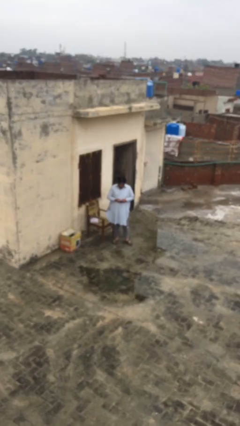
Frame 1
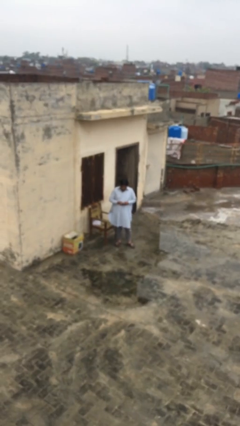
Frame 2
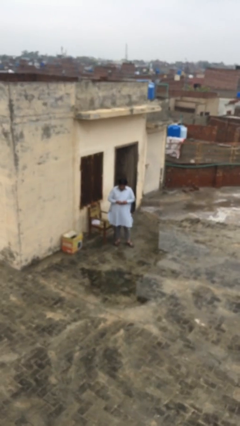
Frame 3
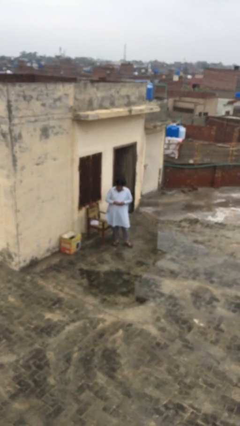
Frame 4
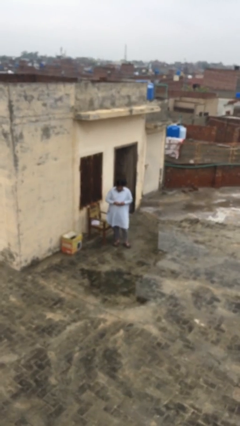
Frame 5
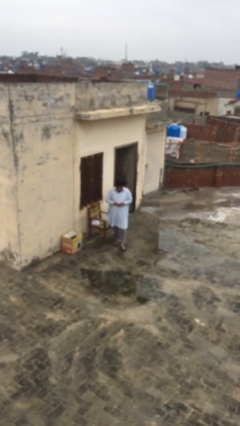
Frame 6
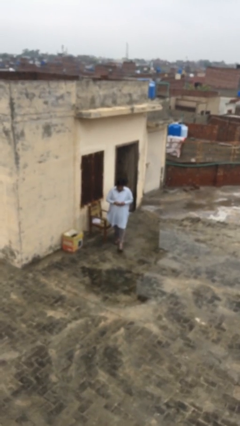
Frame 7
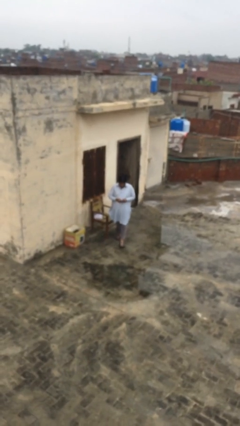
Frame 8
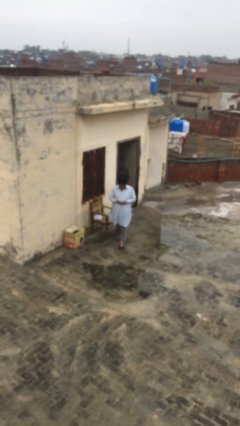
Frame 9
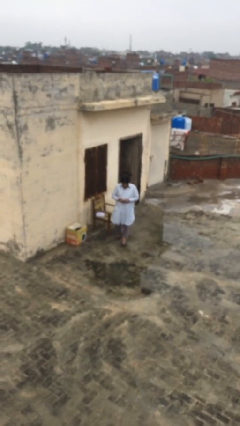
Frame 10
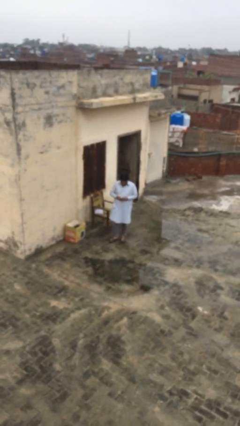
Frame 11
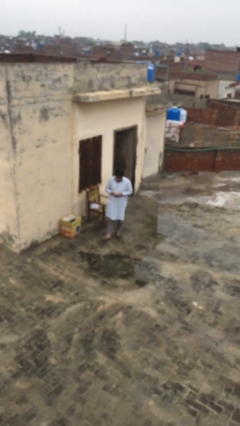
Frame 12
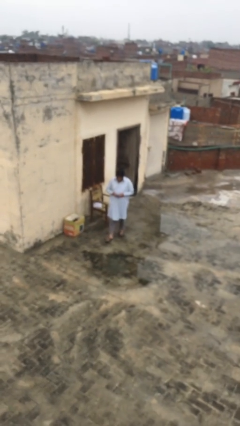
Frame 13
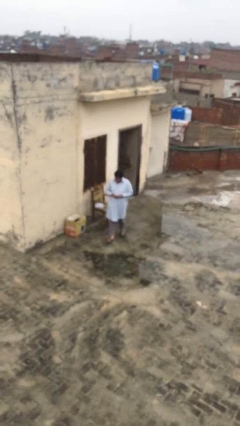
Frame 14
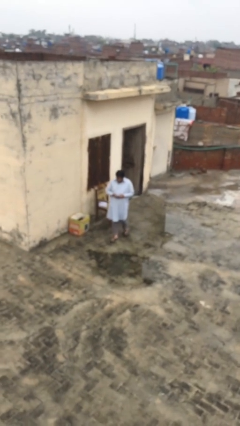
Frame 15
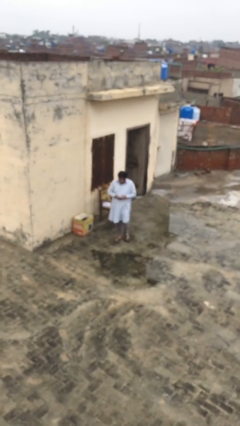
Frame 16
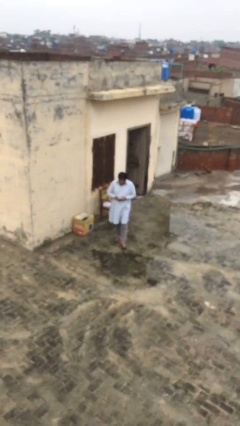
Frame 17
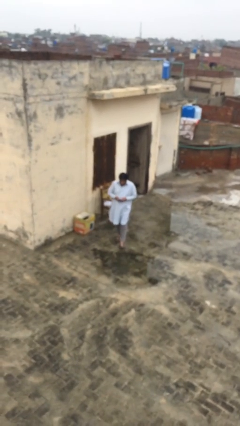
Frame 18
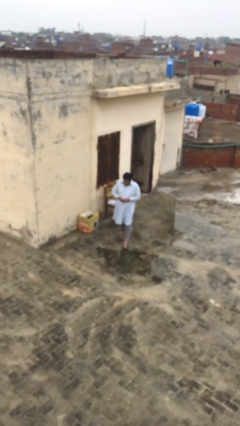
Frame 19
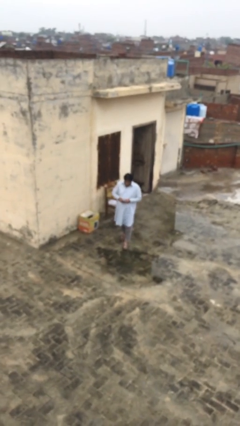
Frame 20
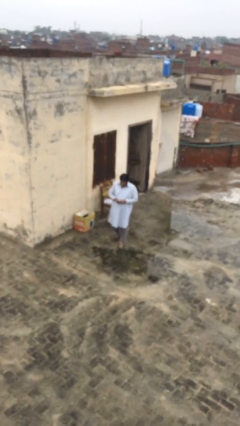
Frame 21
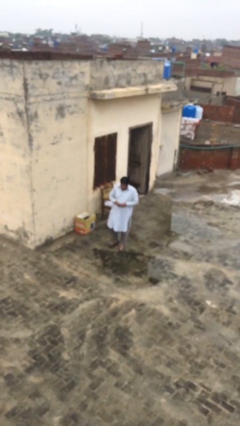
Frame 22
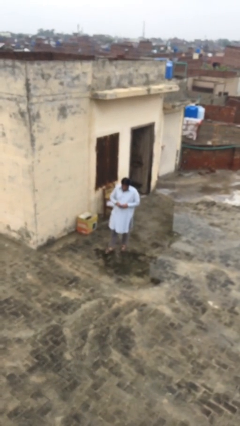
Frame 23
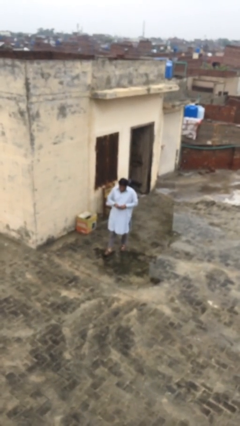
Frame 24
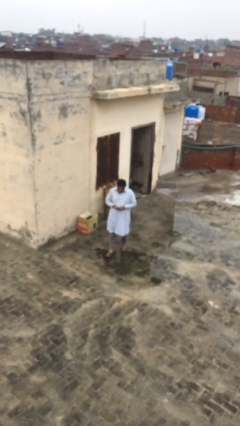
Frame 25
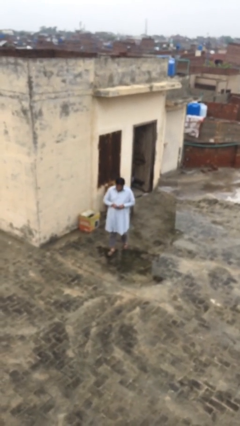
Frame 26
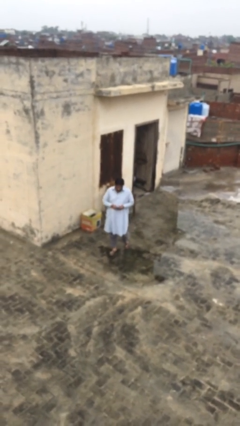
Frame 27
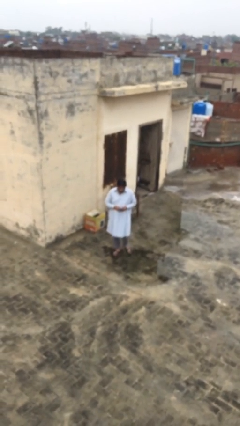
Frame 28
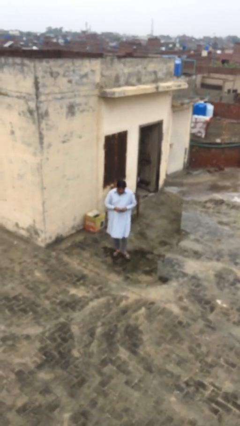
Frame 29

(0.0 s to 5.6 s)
person texts on phone

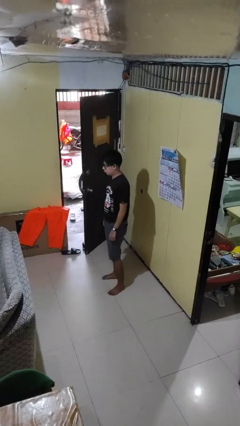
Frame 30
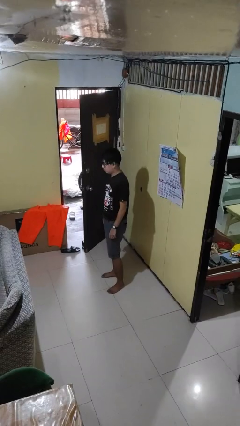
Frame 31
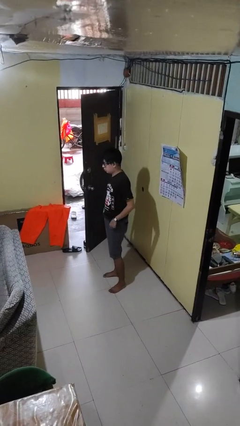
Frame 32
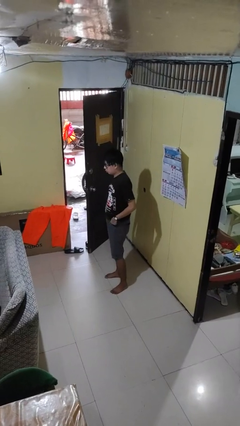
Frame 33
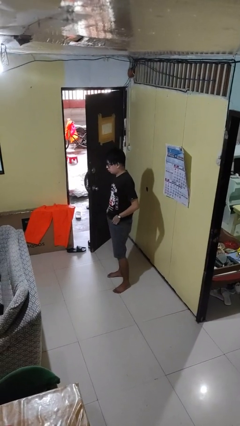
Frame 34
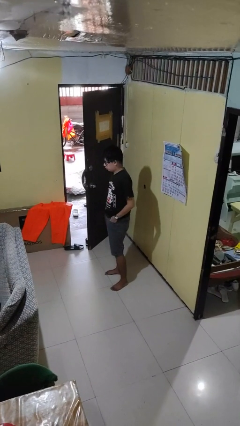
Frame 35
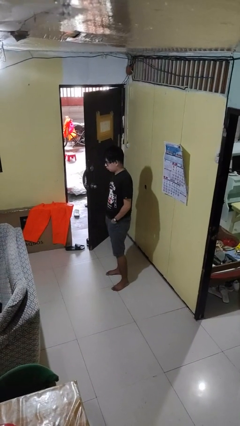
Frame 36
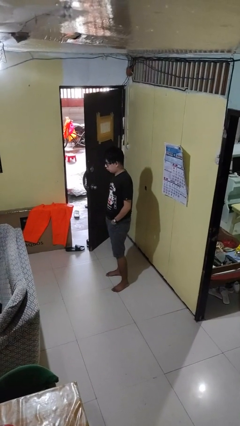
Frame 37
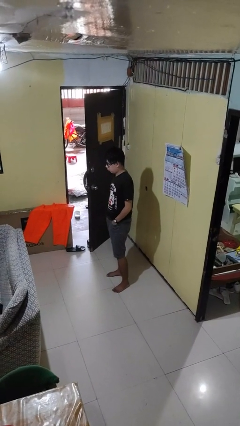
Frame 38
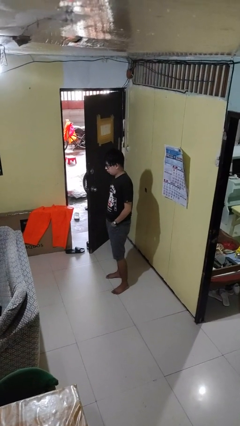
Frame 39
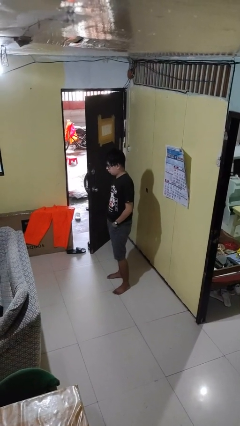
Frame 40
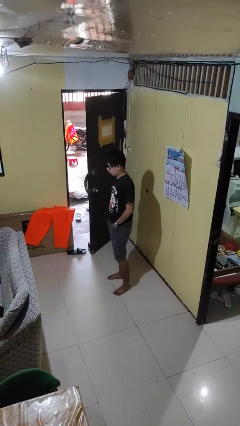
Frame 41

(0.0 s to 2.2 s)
person puts hands in back pockets

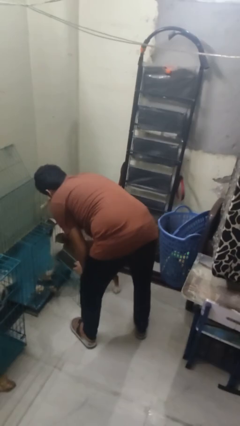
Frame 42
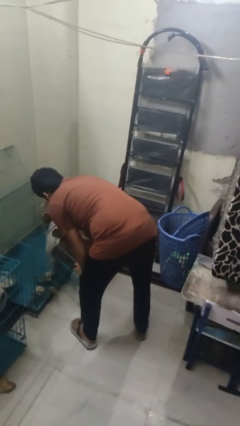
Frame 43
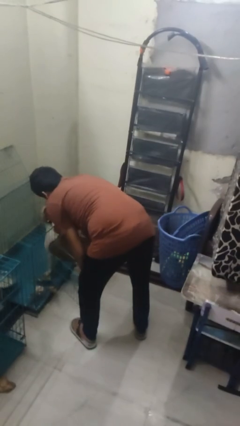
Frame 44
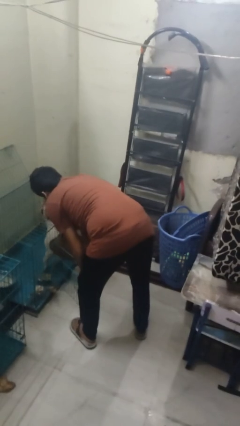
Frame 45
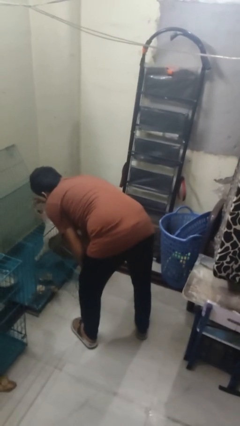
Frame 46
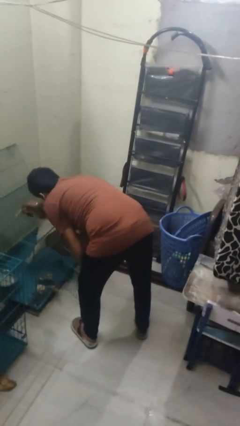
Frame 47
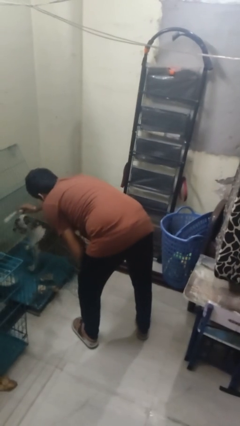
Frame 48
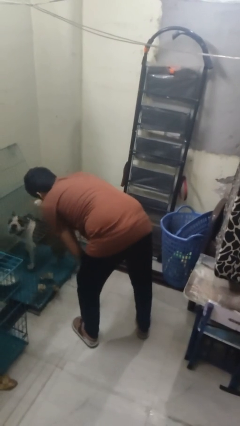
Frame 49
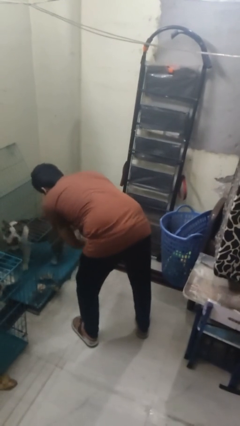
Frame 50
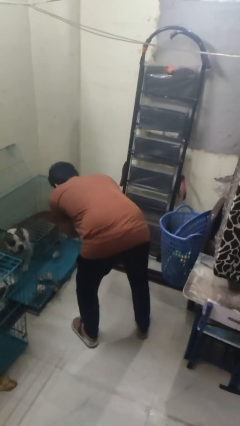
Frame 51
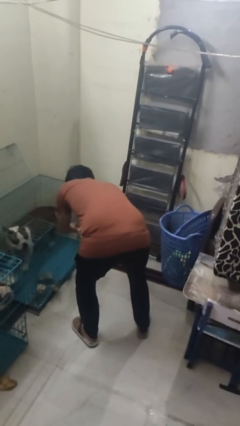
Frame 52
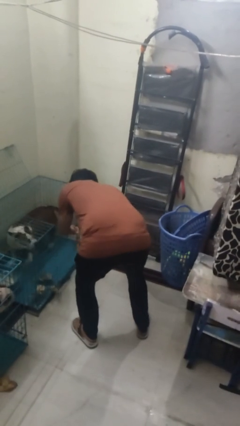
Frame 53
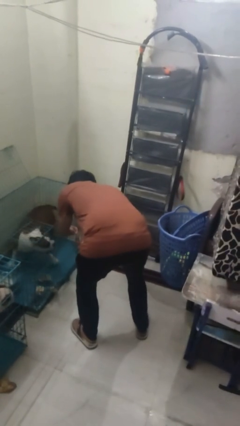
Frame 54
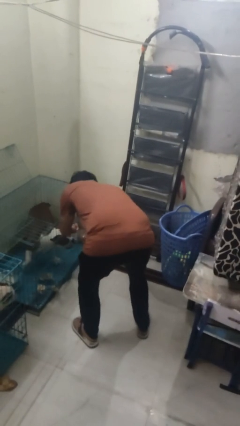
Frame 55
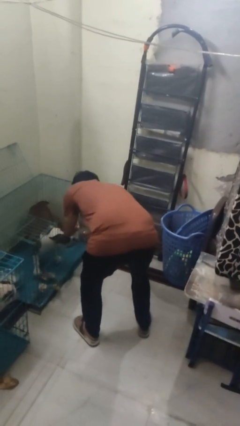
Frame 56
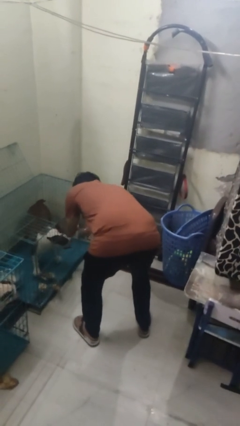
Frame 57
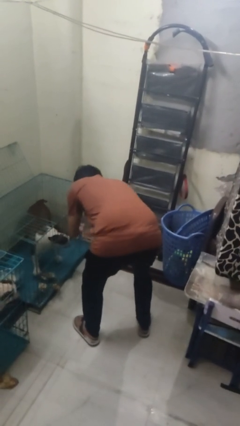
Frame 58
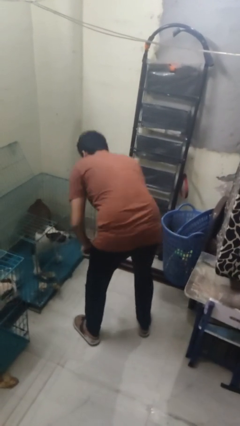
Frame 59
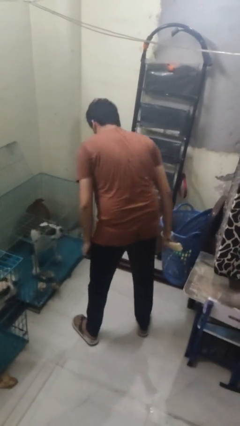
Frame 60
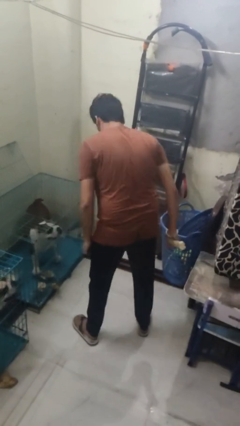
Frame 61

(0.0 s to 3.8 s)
person crates dog

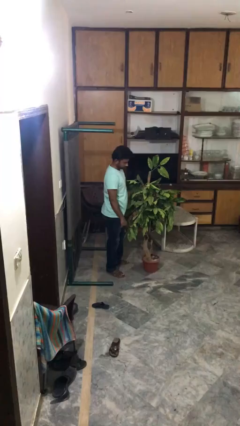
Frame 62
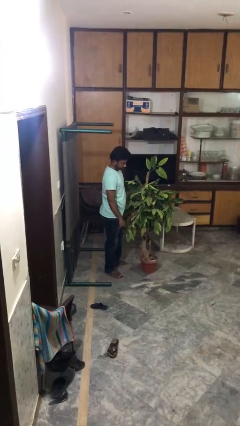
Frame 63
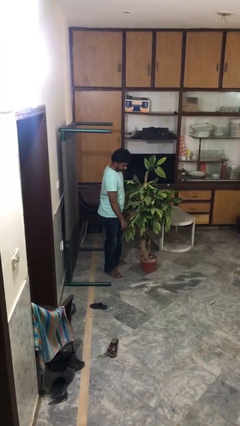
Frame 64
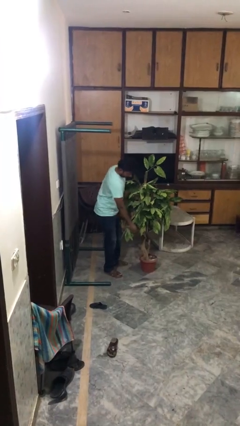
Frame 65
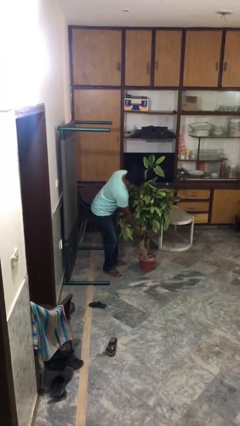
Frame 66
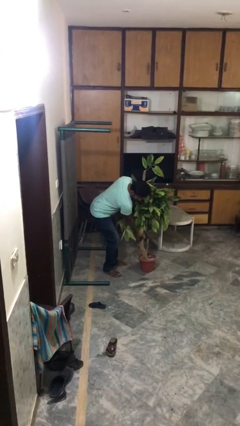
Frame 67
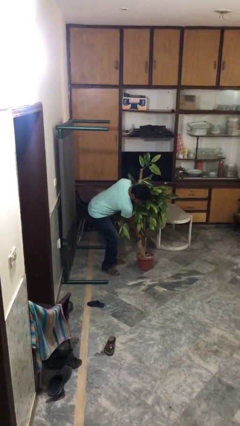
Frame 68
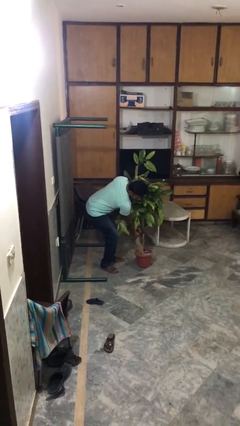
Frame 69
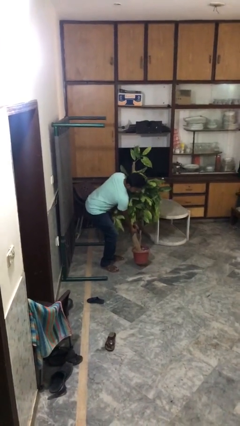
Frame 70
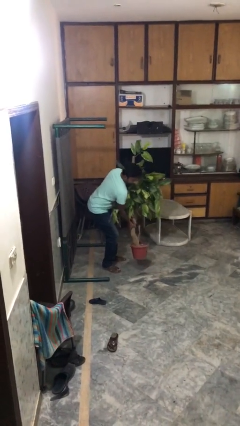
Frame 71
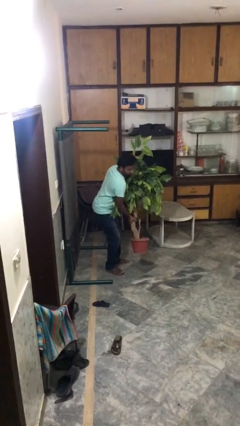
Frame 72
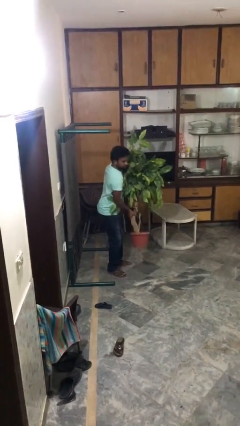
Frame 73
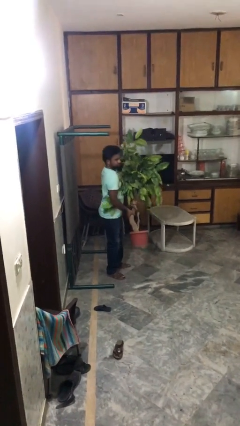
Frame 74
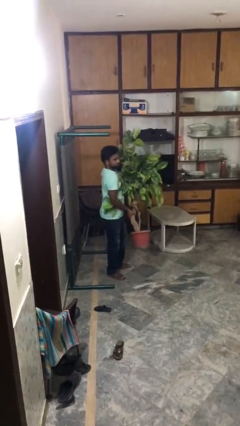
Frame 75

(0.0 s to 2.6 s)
person picks up object from floor

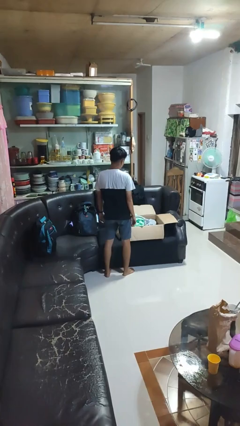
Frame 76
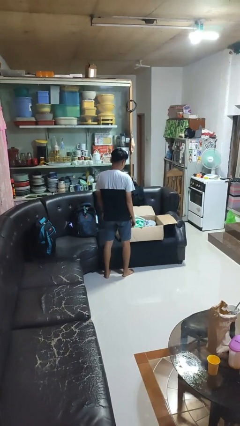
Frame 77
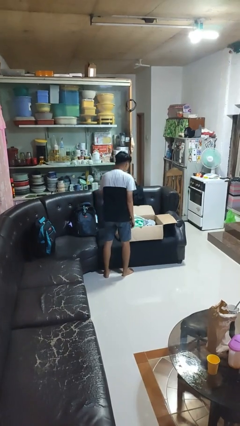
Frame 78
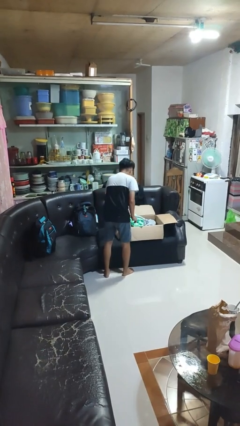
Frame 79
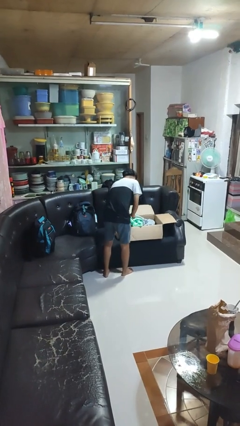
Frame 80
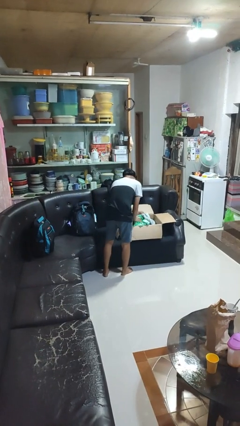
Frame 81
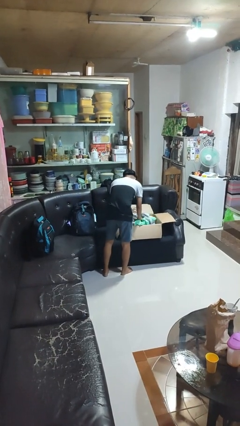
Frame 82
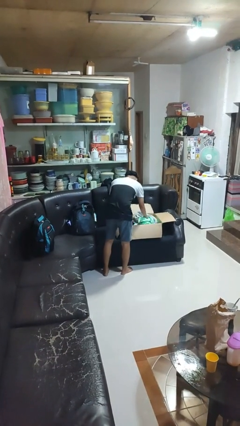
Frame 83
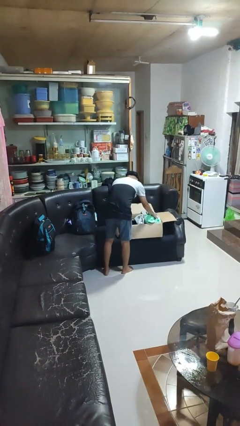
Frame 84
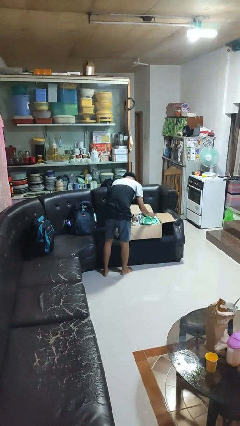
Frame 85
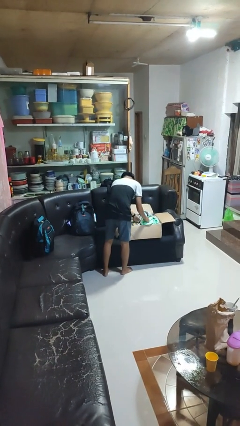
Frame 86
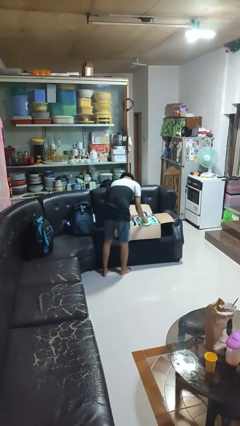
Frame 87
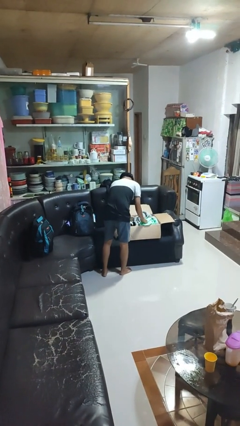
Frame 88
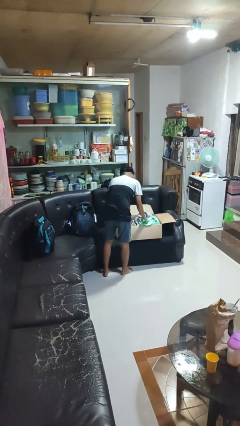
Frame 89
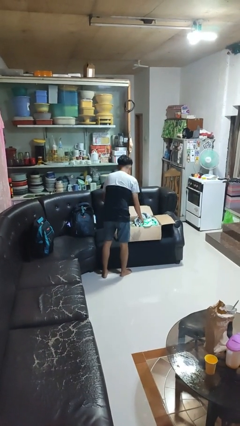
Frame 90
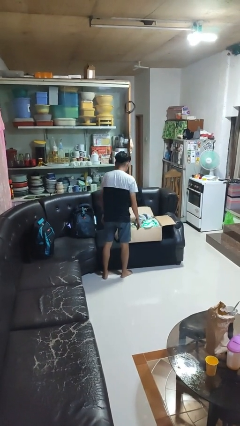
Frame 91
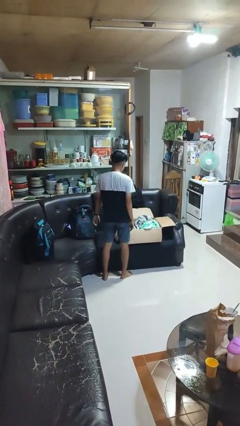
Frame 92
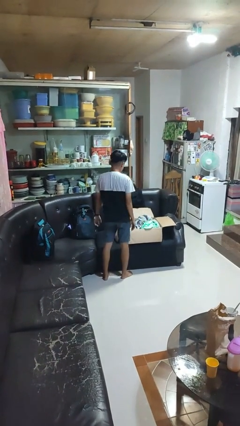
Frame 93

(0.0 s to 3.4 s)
person searches in box
